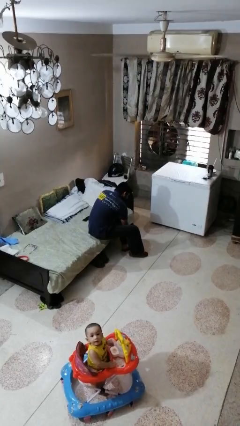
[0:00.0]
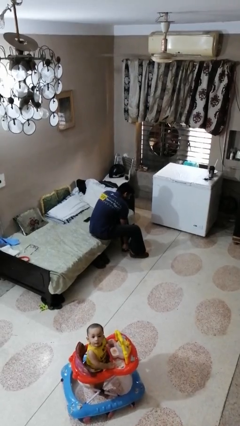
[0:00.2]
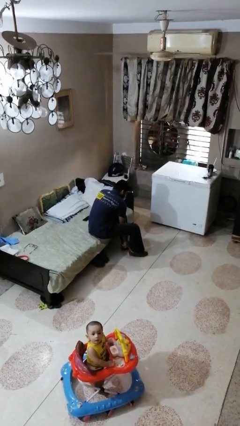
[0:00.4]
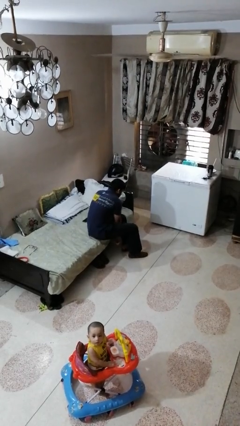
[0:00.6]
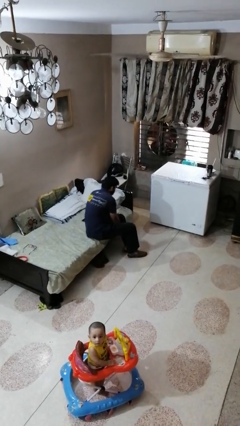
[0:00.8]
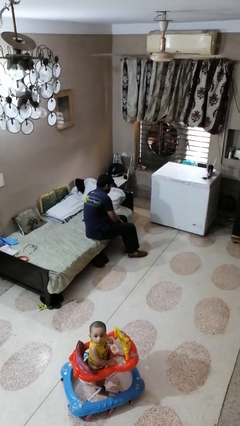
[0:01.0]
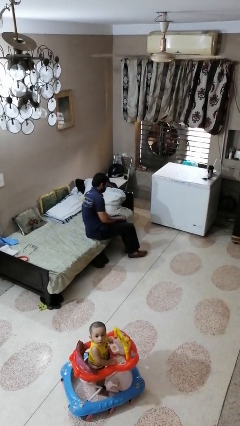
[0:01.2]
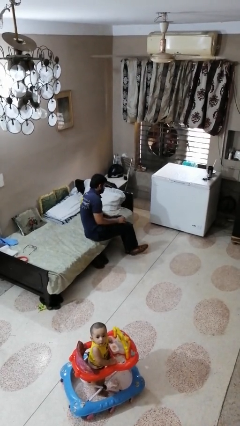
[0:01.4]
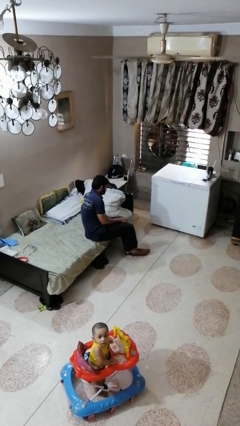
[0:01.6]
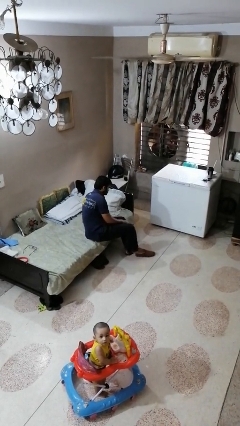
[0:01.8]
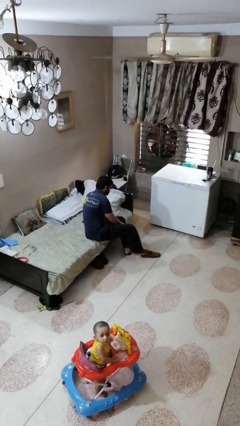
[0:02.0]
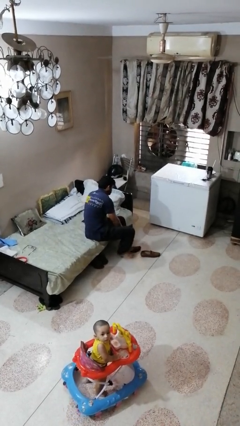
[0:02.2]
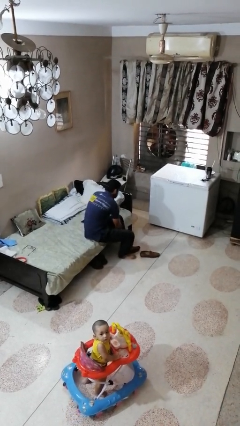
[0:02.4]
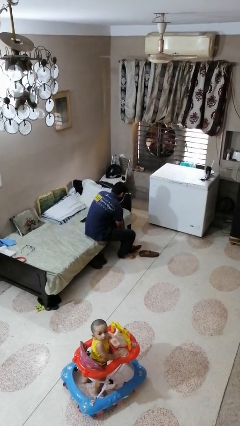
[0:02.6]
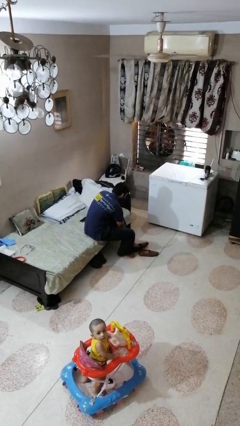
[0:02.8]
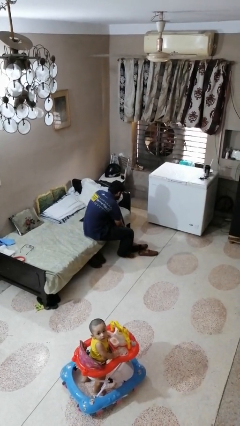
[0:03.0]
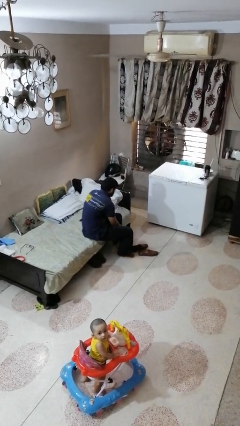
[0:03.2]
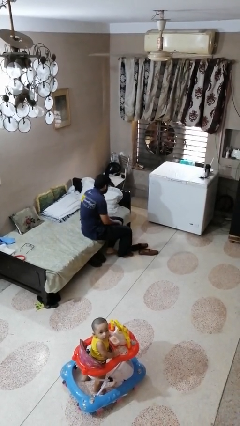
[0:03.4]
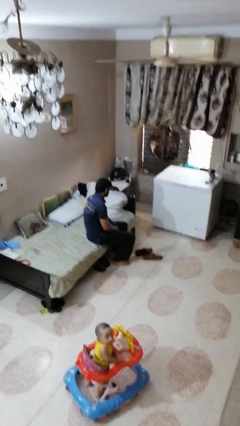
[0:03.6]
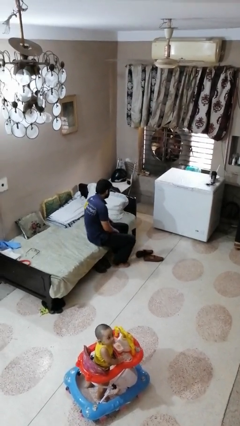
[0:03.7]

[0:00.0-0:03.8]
person takes off shoes

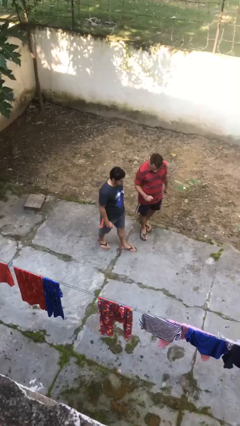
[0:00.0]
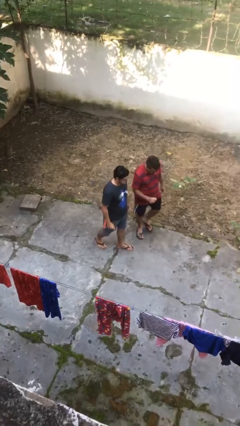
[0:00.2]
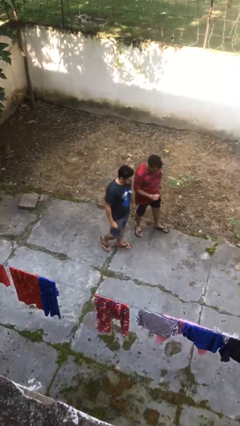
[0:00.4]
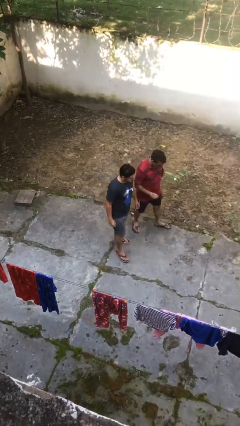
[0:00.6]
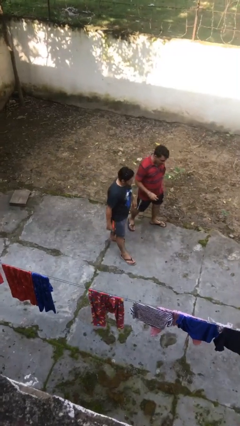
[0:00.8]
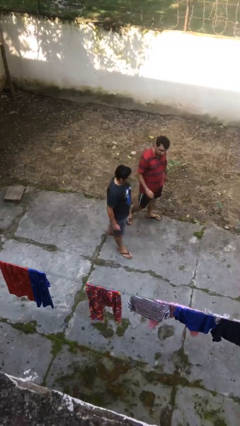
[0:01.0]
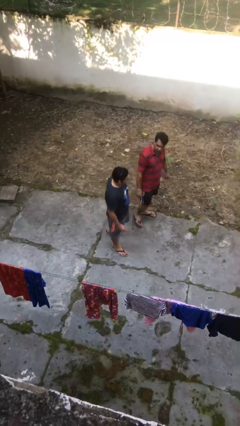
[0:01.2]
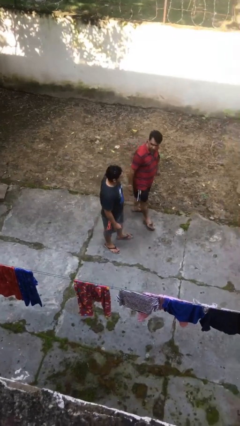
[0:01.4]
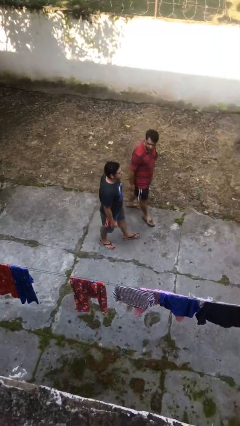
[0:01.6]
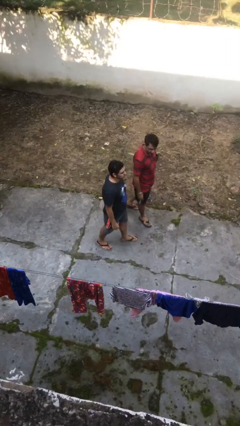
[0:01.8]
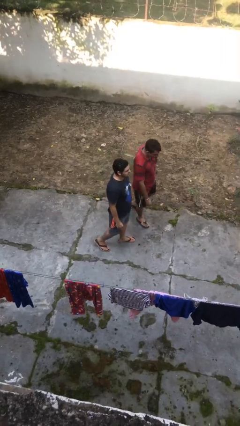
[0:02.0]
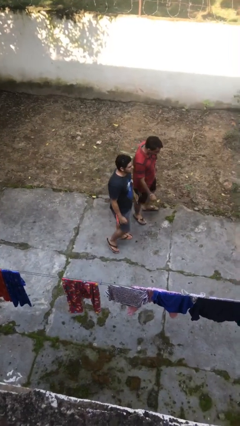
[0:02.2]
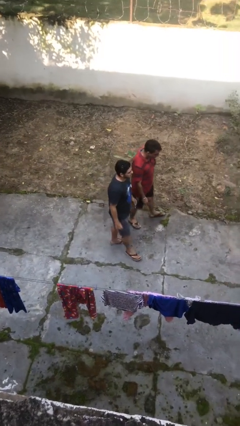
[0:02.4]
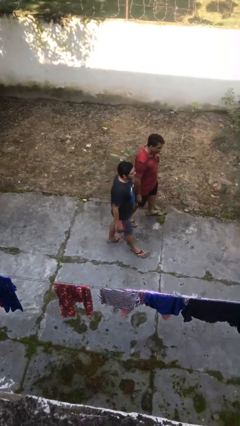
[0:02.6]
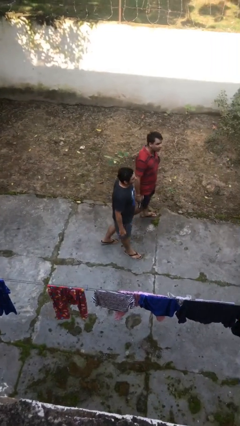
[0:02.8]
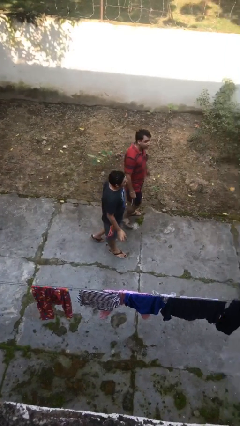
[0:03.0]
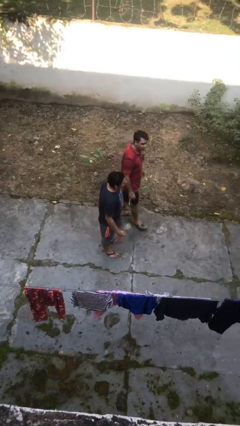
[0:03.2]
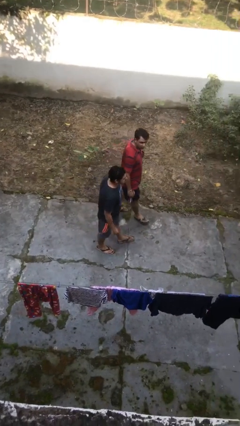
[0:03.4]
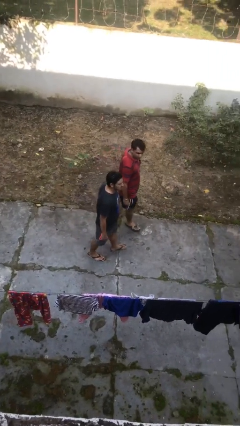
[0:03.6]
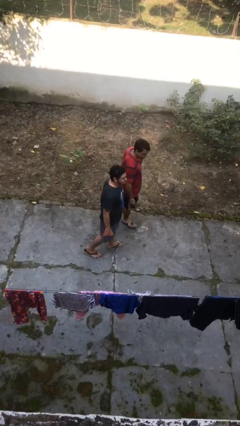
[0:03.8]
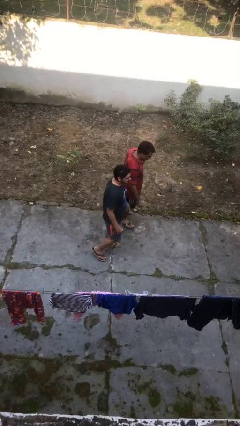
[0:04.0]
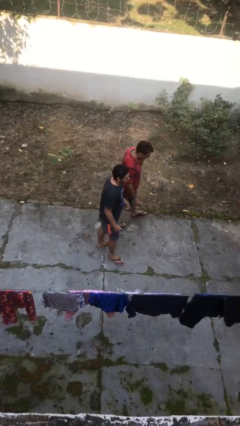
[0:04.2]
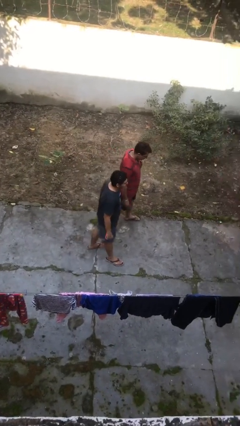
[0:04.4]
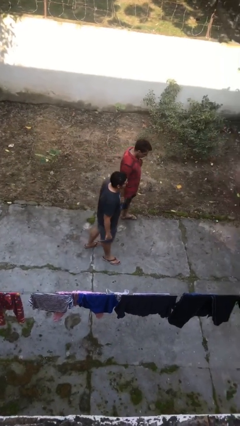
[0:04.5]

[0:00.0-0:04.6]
person talks to person

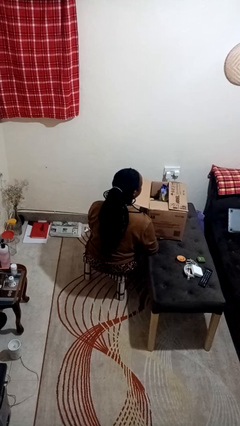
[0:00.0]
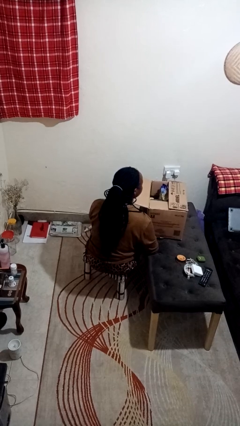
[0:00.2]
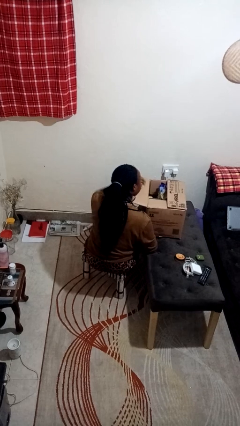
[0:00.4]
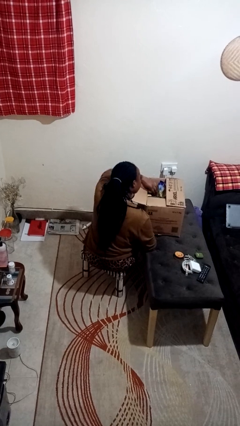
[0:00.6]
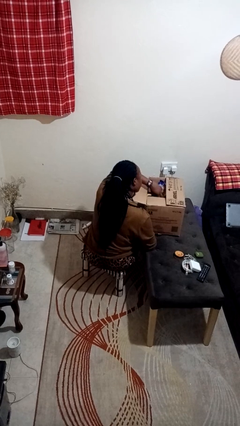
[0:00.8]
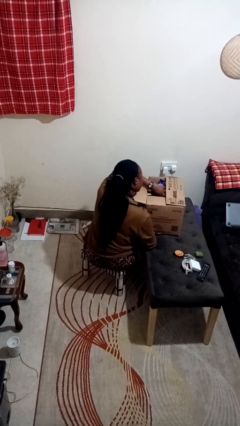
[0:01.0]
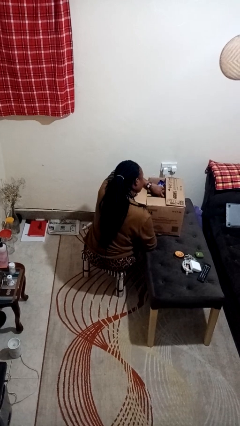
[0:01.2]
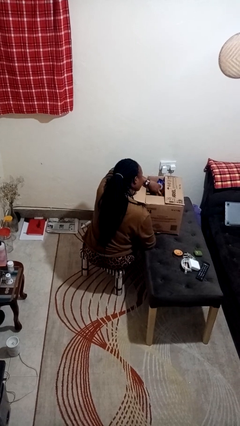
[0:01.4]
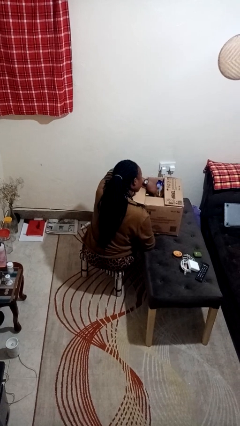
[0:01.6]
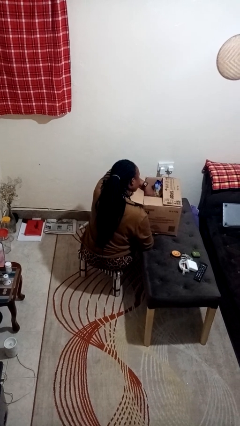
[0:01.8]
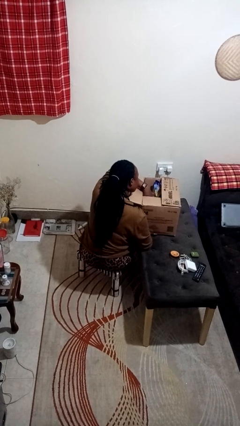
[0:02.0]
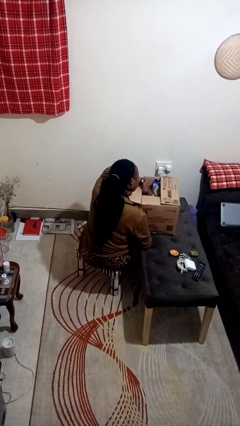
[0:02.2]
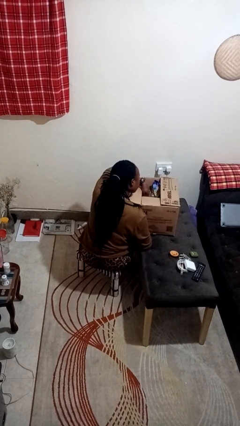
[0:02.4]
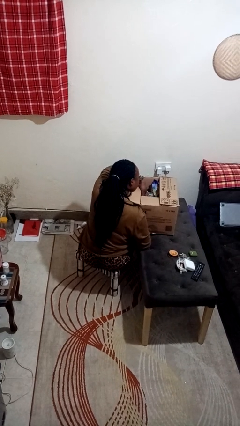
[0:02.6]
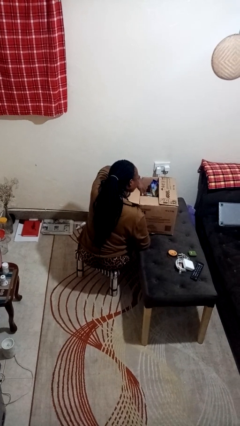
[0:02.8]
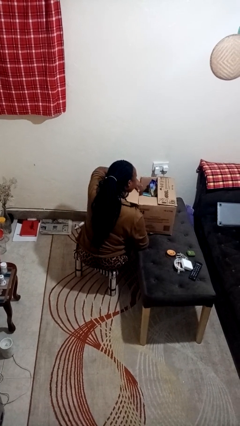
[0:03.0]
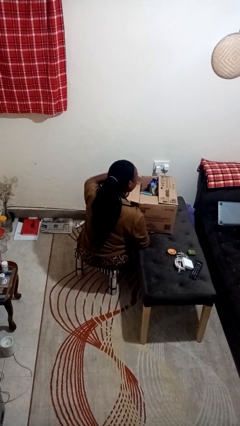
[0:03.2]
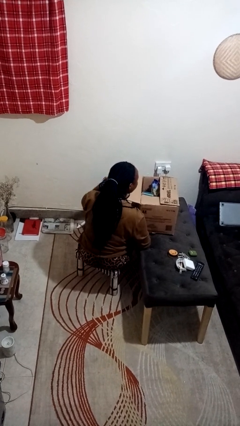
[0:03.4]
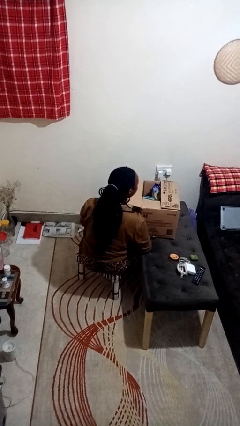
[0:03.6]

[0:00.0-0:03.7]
person searches in box

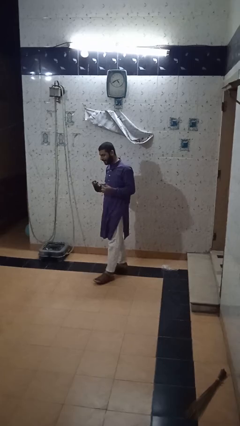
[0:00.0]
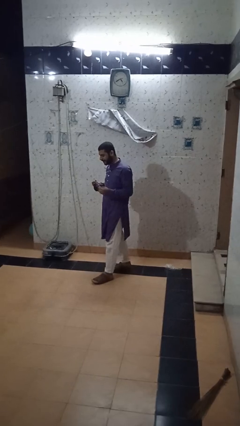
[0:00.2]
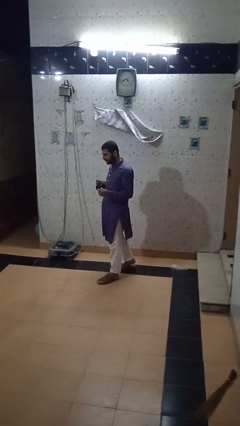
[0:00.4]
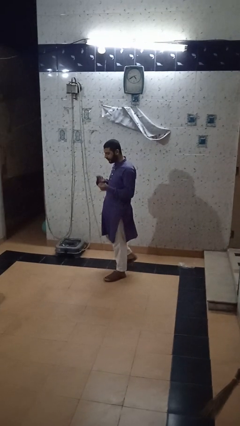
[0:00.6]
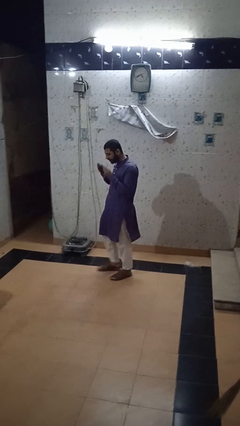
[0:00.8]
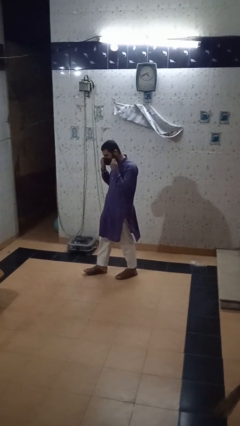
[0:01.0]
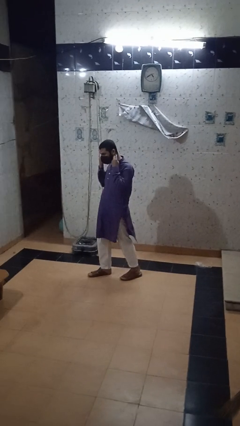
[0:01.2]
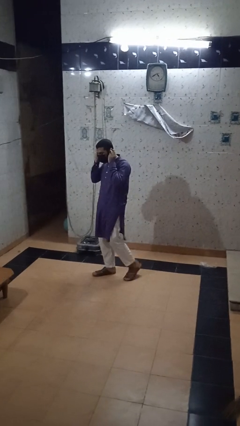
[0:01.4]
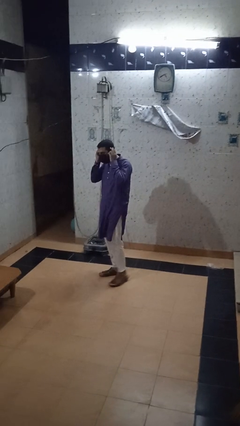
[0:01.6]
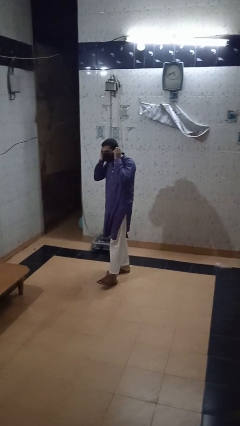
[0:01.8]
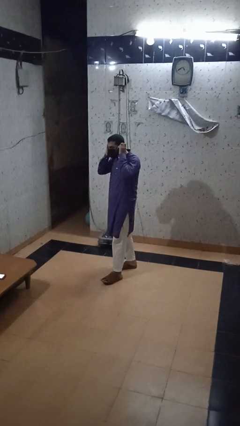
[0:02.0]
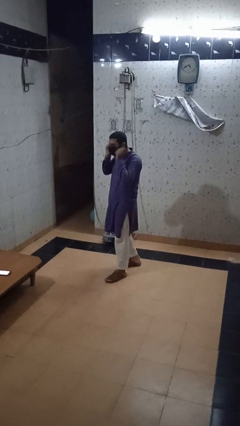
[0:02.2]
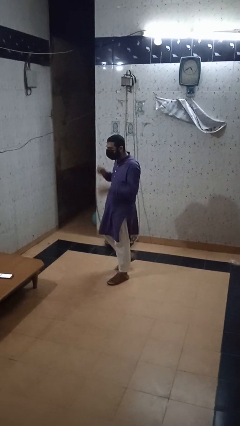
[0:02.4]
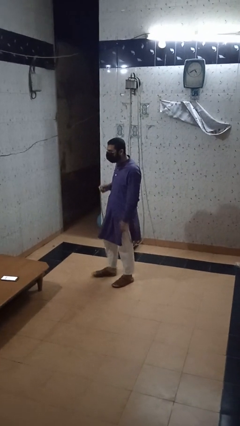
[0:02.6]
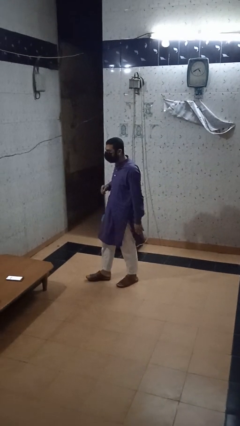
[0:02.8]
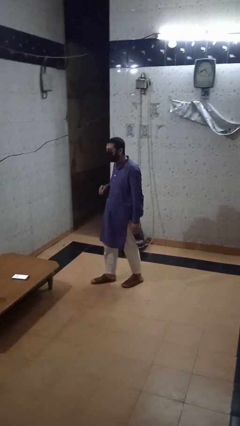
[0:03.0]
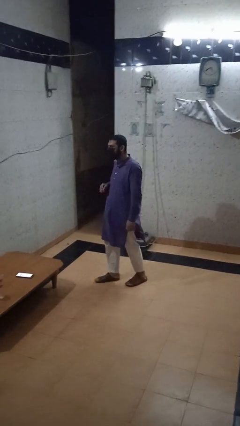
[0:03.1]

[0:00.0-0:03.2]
person puts on facemask

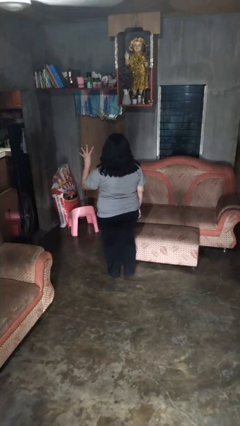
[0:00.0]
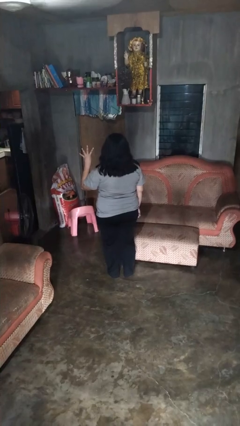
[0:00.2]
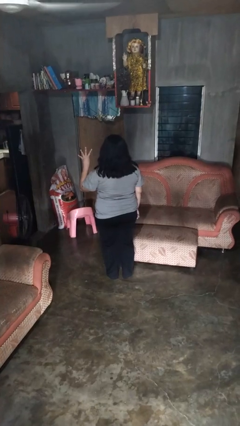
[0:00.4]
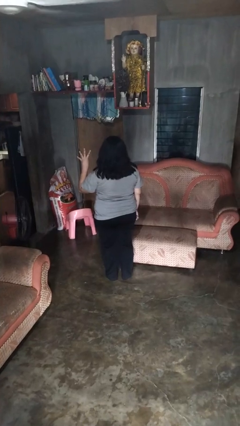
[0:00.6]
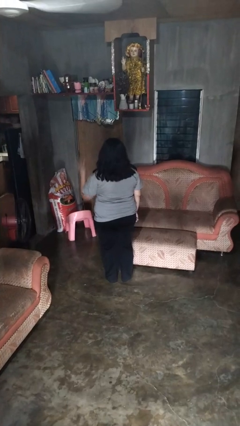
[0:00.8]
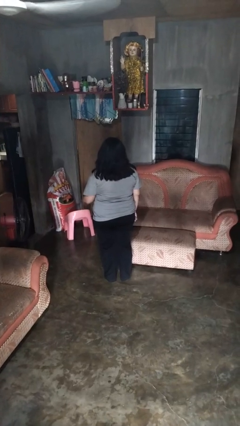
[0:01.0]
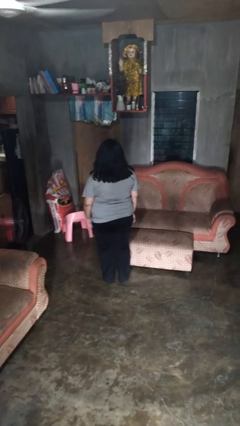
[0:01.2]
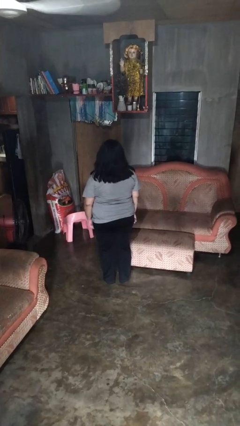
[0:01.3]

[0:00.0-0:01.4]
person gestures number four

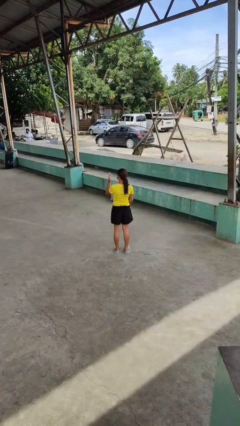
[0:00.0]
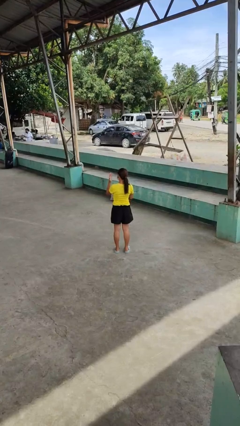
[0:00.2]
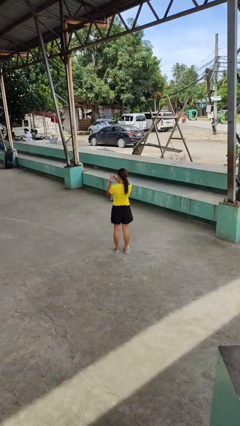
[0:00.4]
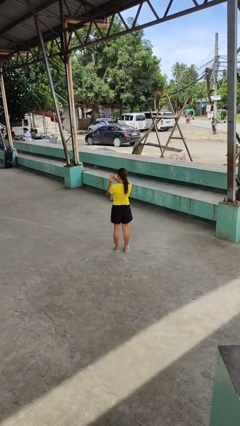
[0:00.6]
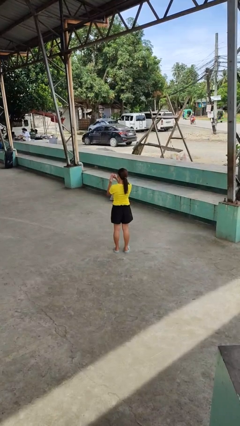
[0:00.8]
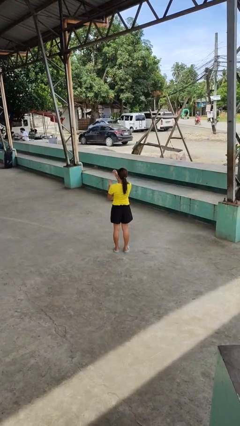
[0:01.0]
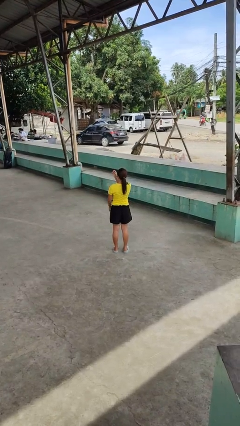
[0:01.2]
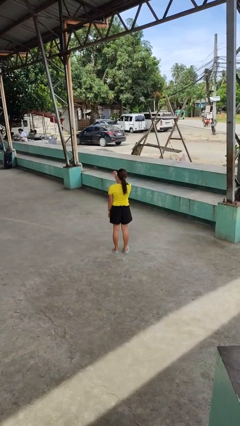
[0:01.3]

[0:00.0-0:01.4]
person takes off ring
